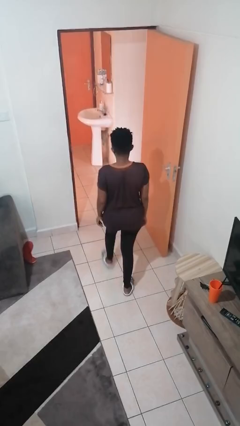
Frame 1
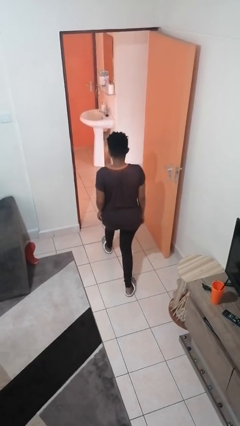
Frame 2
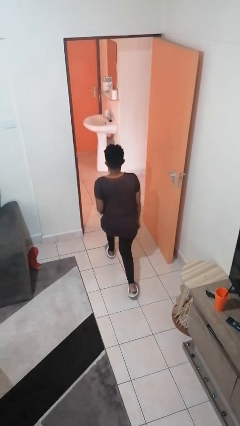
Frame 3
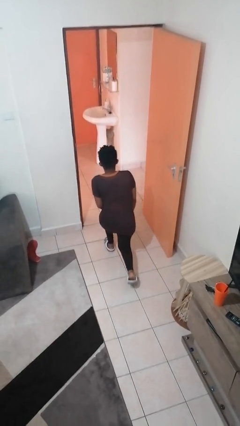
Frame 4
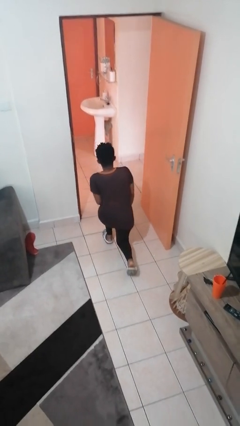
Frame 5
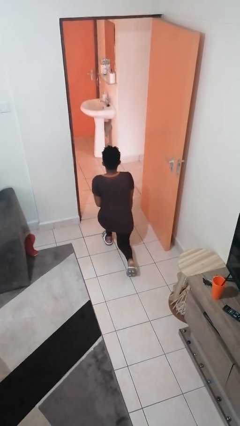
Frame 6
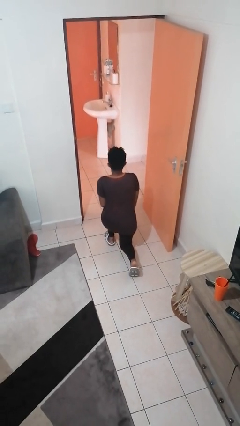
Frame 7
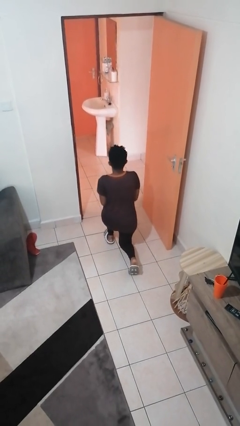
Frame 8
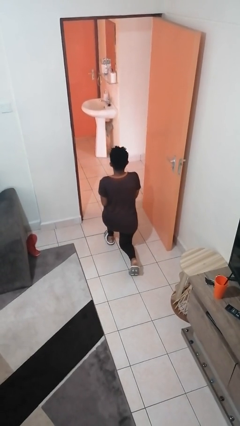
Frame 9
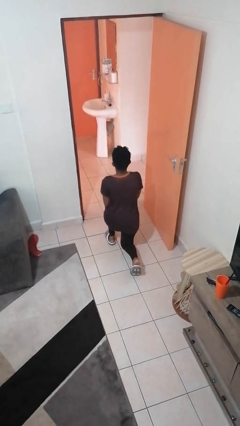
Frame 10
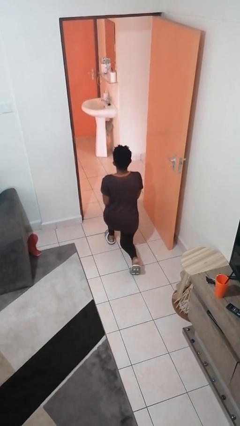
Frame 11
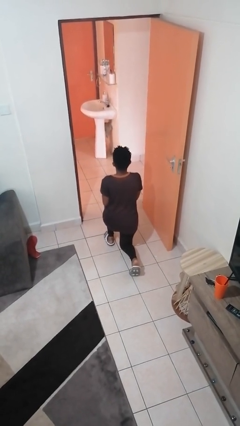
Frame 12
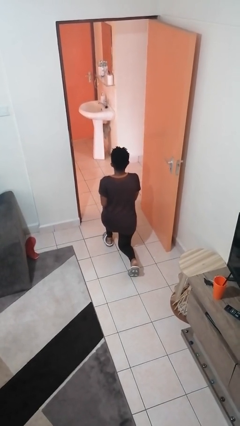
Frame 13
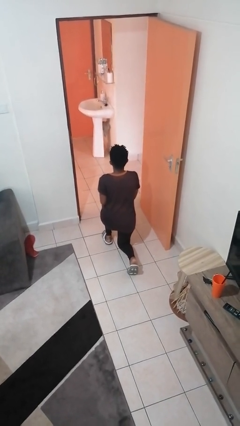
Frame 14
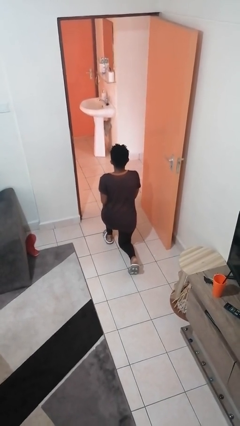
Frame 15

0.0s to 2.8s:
person kneels

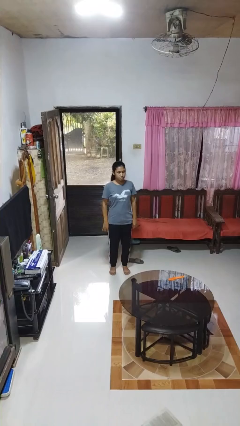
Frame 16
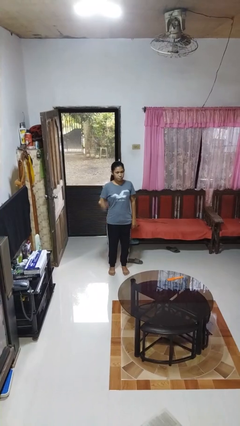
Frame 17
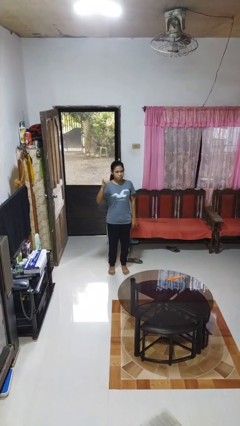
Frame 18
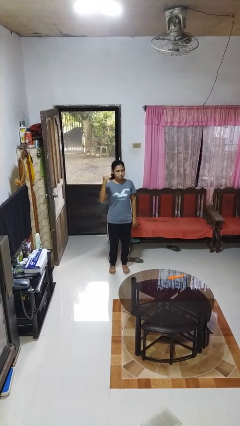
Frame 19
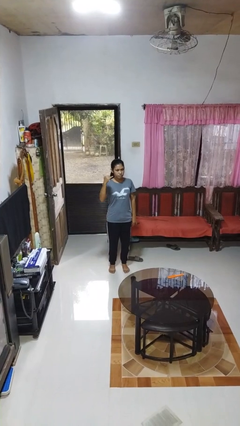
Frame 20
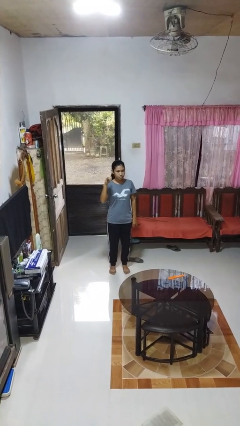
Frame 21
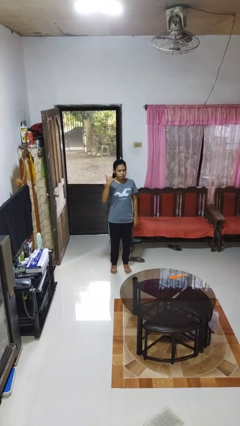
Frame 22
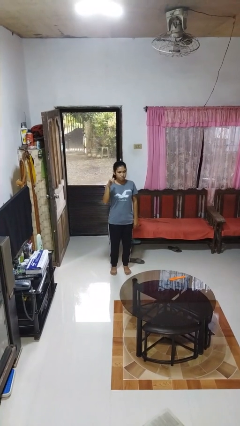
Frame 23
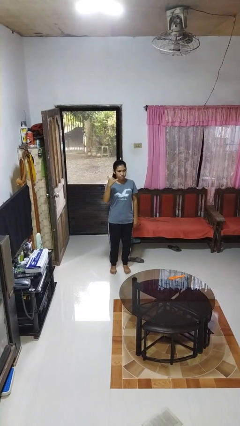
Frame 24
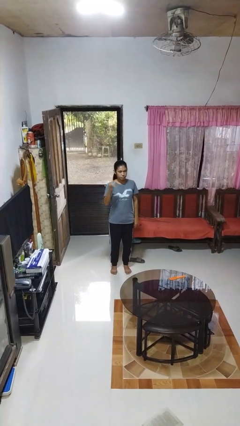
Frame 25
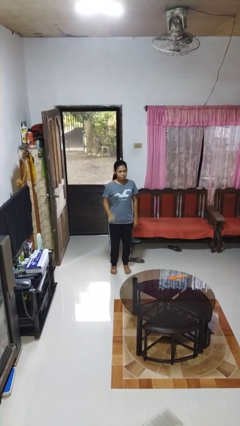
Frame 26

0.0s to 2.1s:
person gestures hang loose

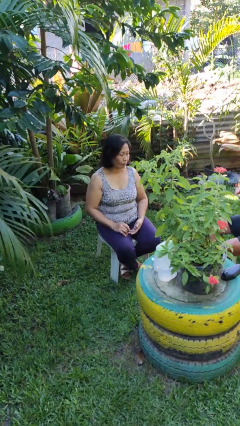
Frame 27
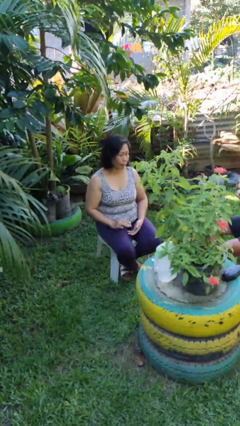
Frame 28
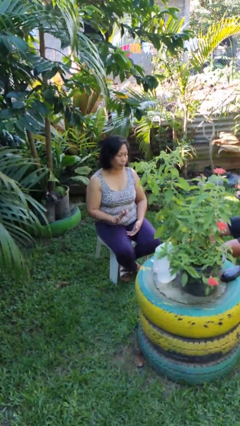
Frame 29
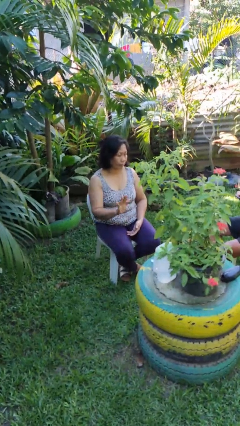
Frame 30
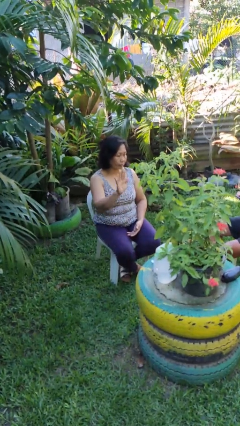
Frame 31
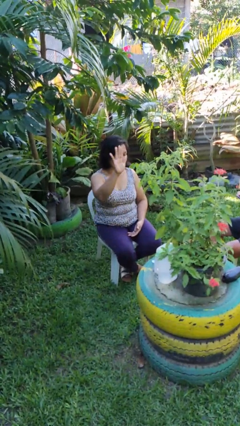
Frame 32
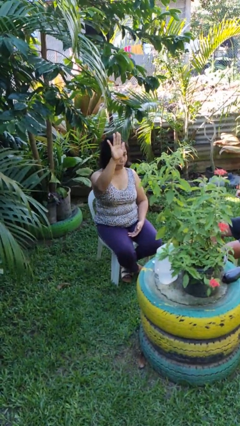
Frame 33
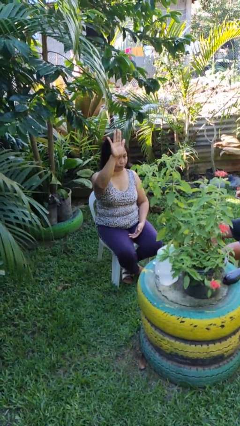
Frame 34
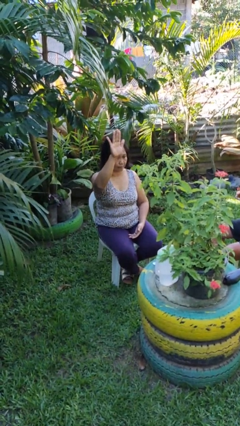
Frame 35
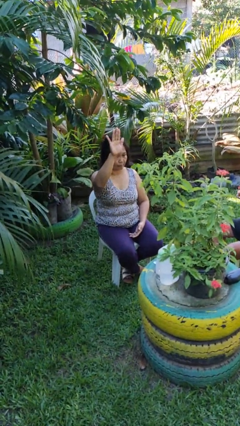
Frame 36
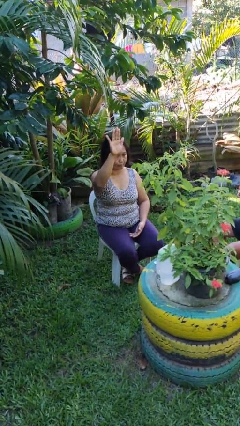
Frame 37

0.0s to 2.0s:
person gestures swipe up

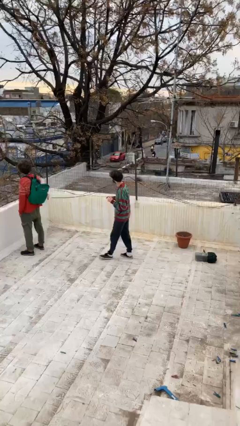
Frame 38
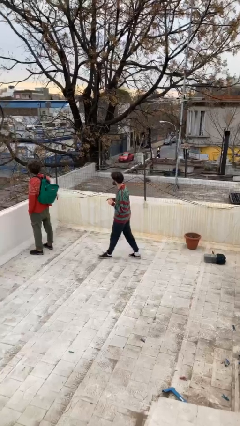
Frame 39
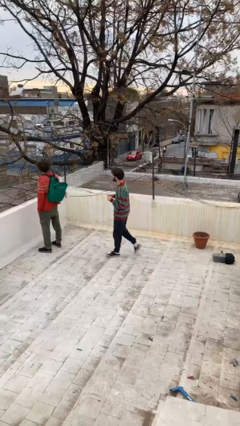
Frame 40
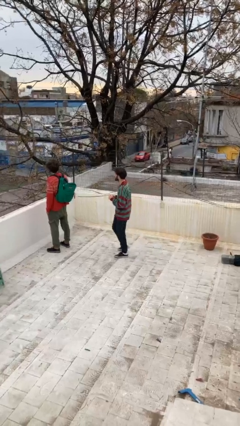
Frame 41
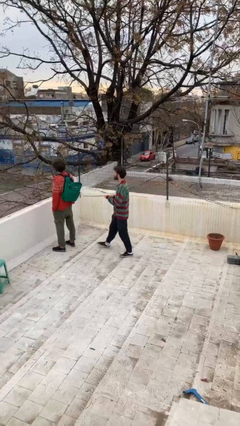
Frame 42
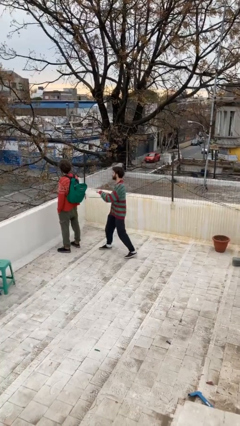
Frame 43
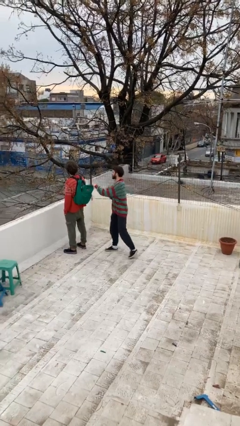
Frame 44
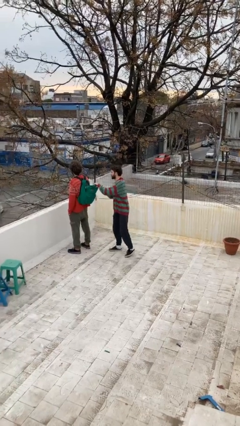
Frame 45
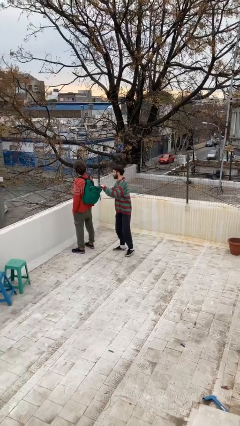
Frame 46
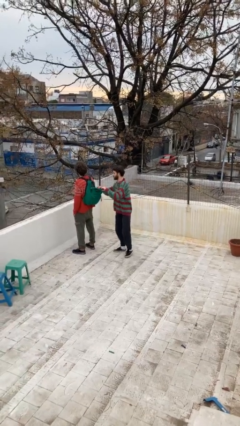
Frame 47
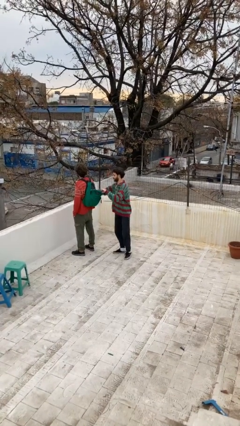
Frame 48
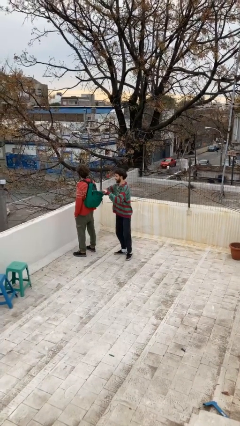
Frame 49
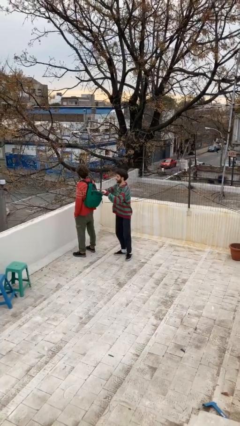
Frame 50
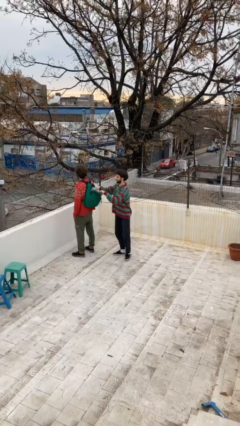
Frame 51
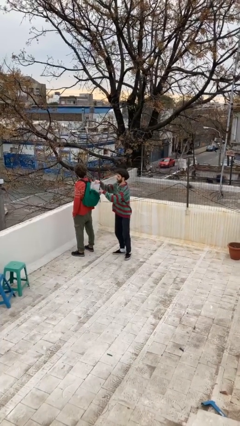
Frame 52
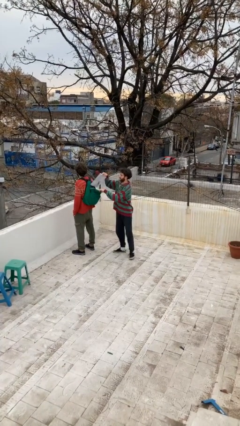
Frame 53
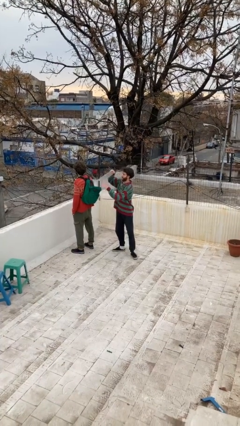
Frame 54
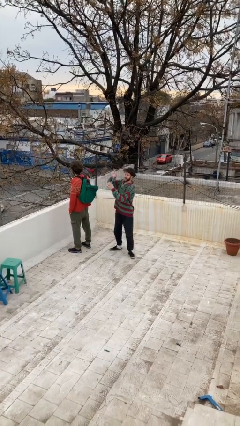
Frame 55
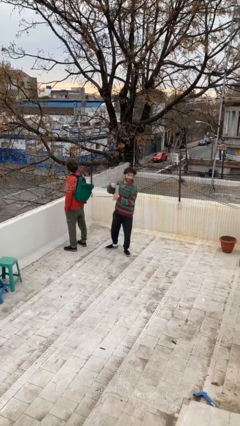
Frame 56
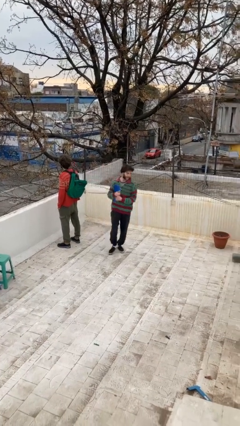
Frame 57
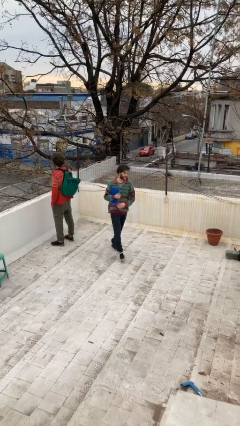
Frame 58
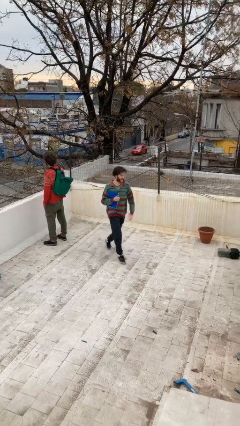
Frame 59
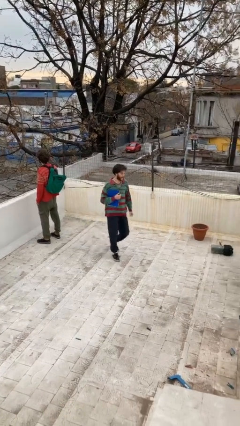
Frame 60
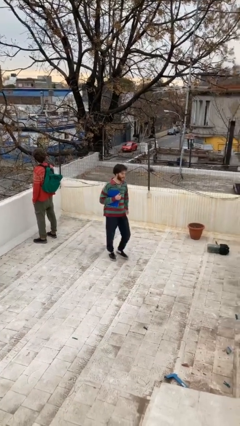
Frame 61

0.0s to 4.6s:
person steals object from person

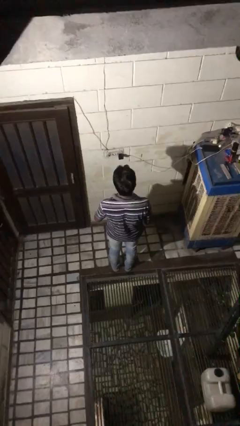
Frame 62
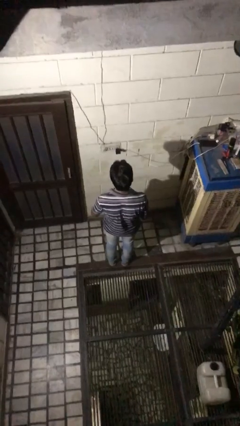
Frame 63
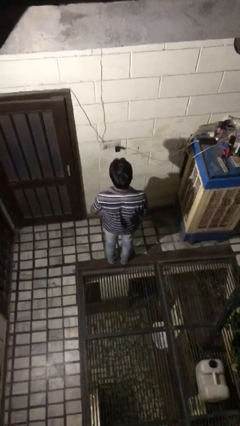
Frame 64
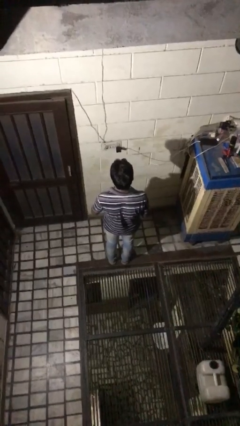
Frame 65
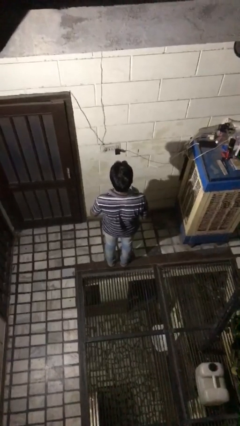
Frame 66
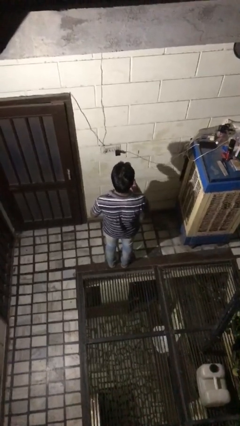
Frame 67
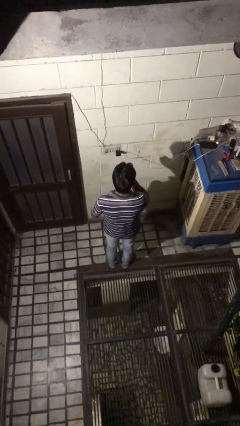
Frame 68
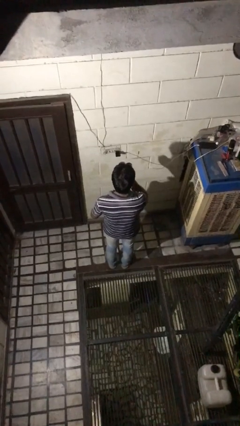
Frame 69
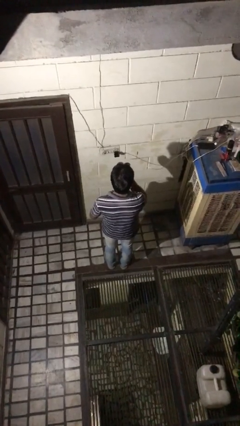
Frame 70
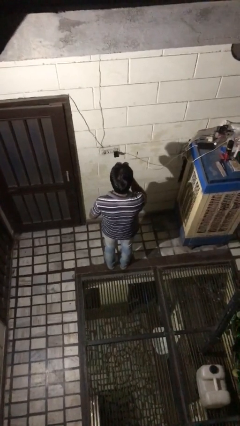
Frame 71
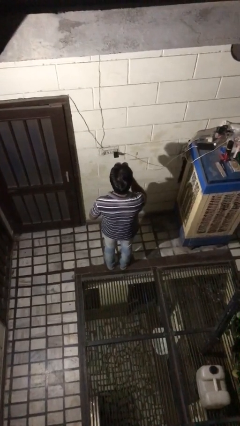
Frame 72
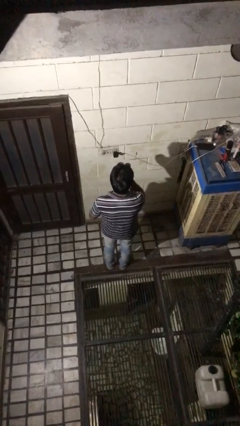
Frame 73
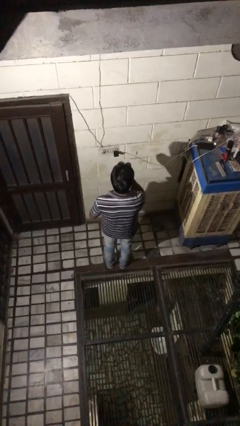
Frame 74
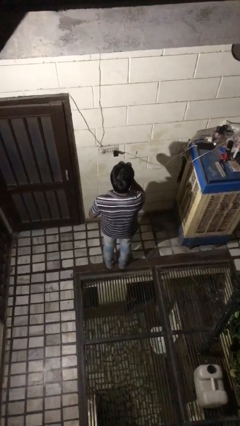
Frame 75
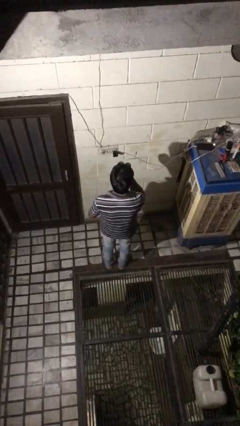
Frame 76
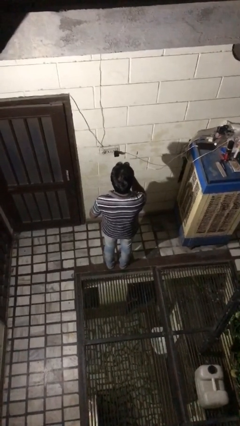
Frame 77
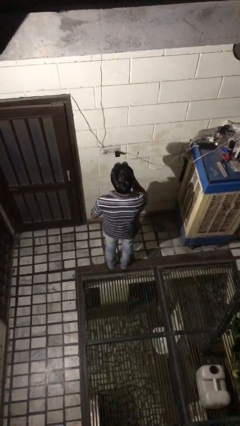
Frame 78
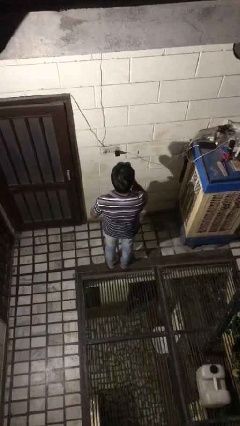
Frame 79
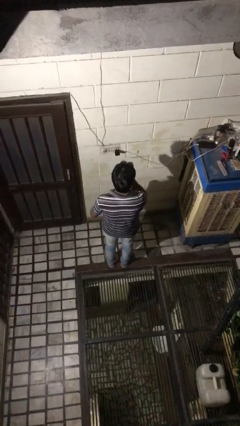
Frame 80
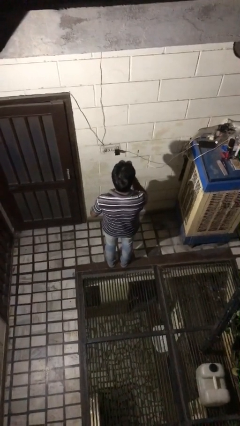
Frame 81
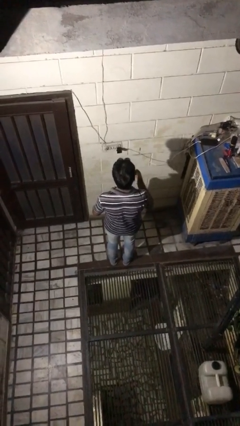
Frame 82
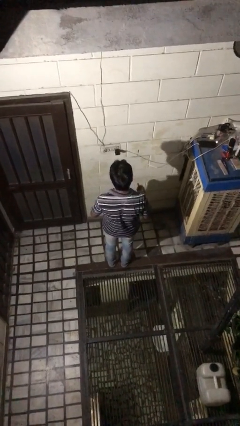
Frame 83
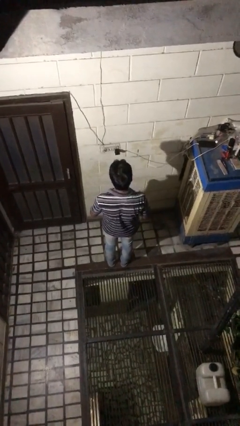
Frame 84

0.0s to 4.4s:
person applies lip makeup

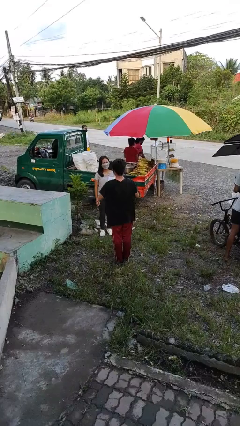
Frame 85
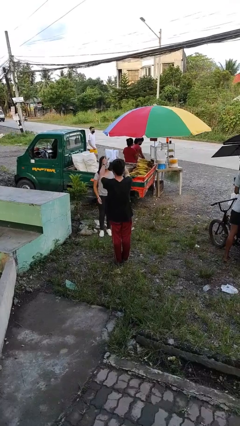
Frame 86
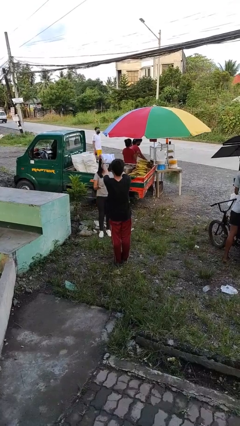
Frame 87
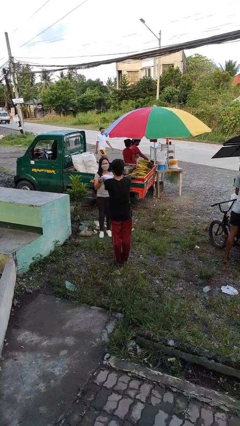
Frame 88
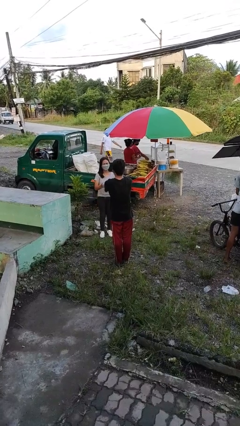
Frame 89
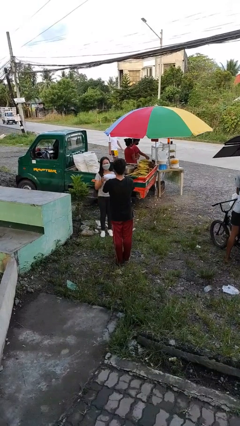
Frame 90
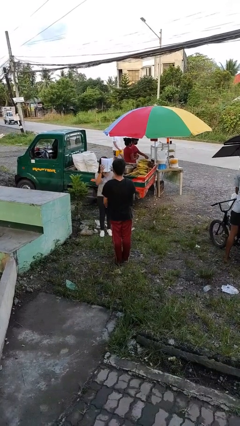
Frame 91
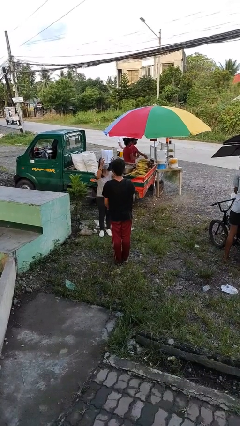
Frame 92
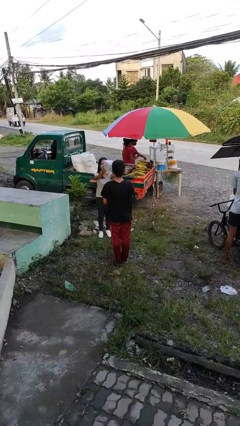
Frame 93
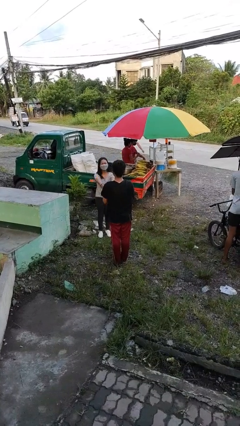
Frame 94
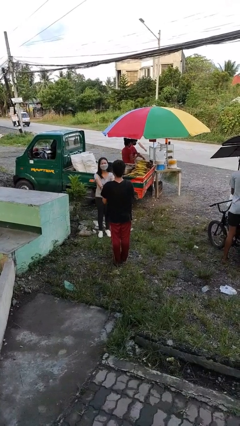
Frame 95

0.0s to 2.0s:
person transfers object to person

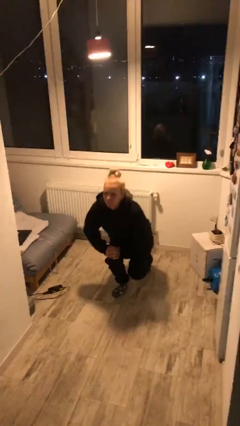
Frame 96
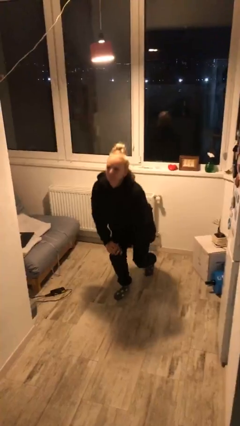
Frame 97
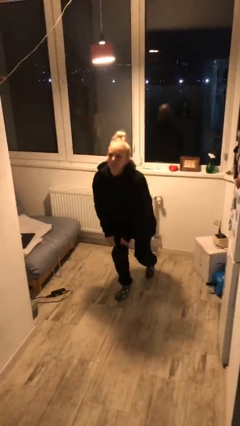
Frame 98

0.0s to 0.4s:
person stands up
